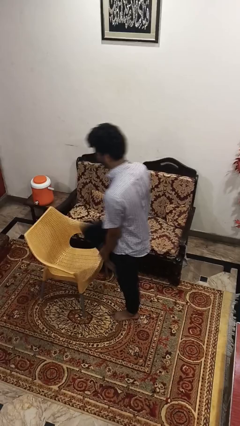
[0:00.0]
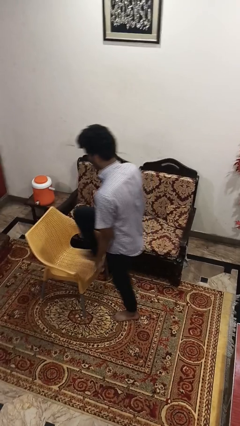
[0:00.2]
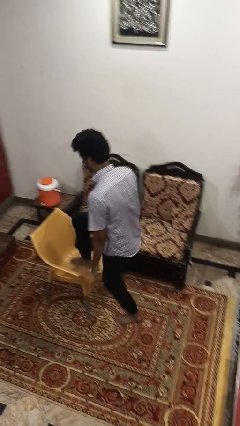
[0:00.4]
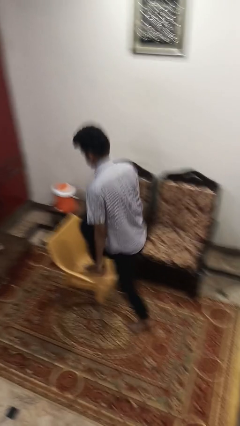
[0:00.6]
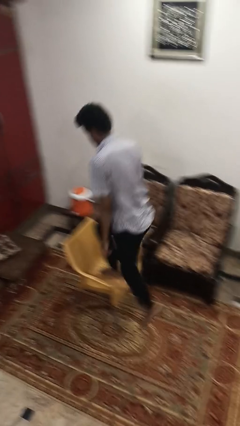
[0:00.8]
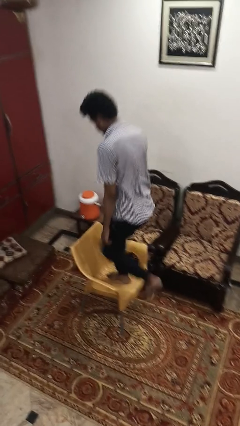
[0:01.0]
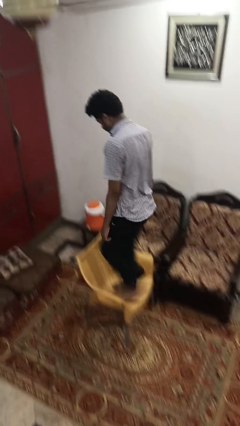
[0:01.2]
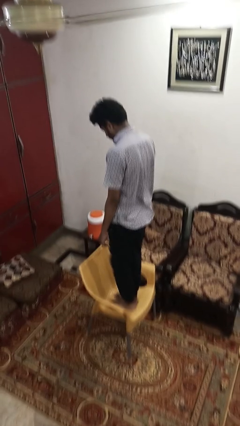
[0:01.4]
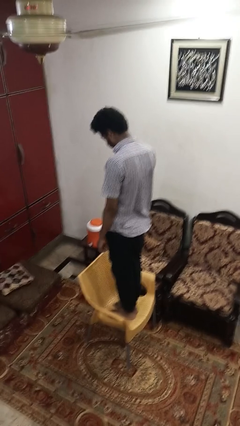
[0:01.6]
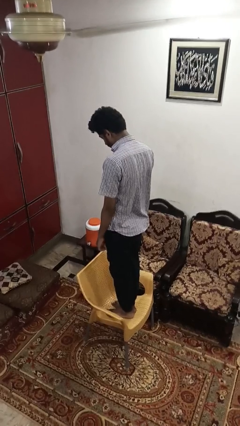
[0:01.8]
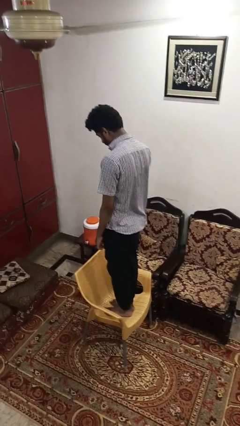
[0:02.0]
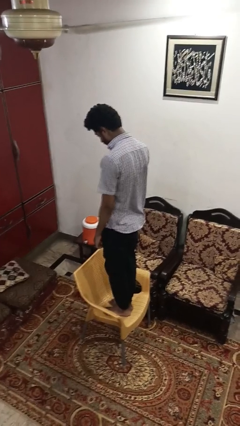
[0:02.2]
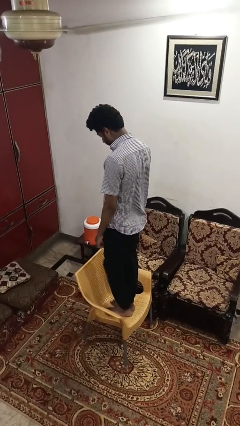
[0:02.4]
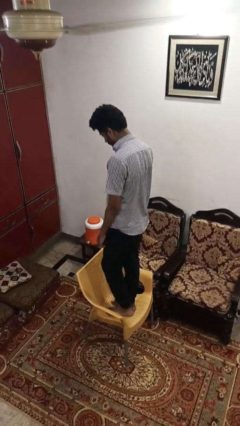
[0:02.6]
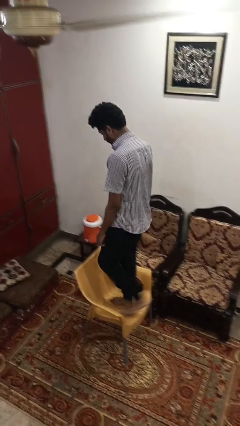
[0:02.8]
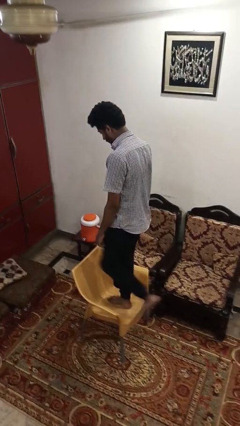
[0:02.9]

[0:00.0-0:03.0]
person climbs on chair

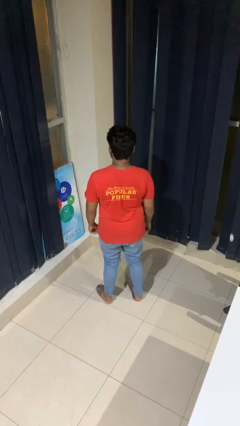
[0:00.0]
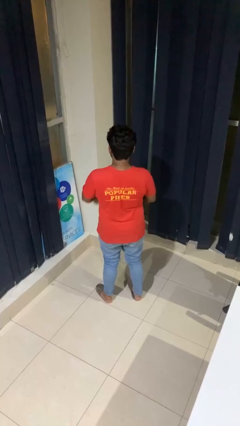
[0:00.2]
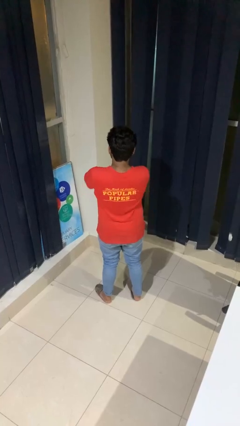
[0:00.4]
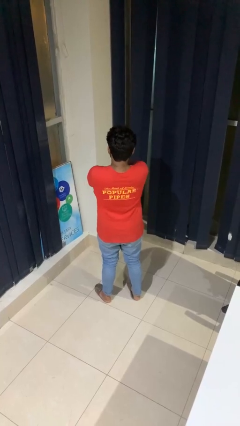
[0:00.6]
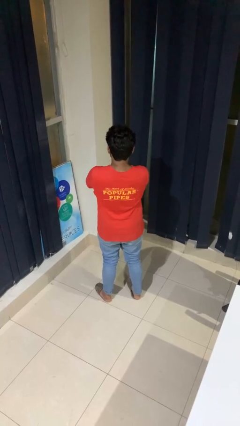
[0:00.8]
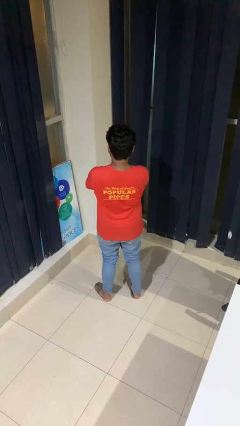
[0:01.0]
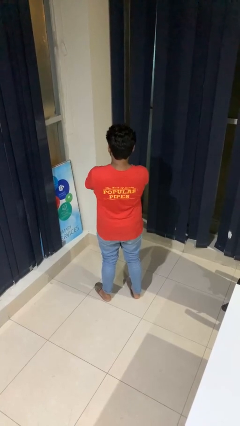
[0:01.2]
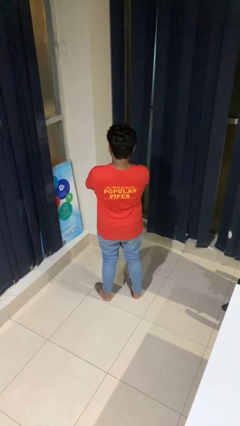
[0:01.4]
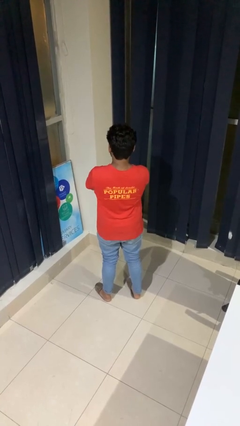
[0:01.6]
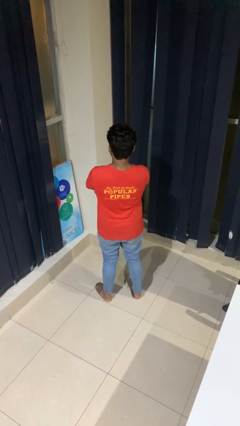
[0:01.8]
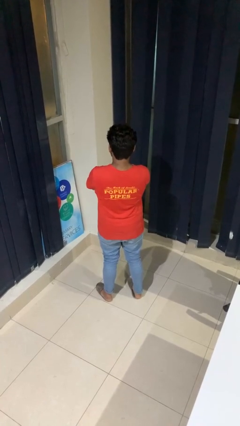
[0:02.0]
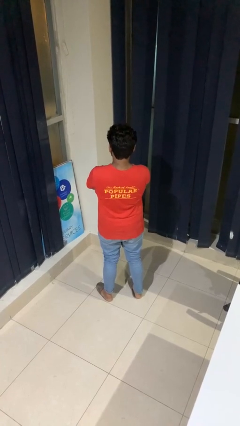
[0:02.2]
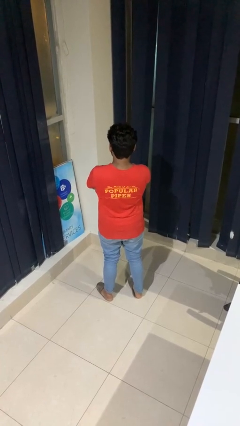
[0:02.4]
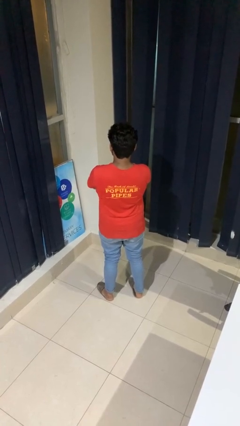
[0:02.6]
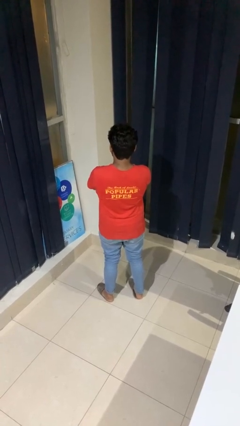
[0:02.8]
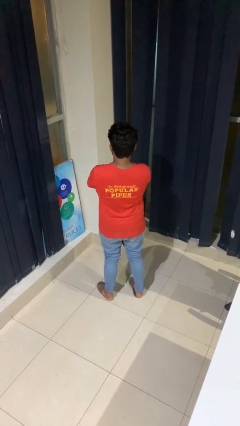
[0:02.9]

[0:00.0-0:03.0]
person crosses arms

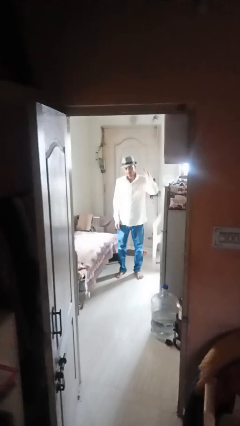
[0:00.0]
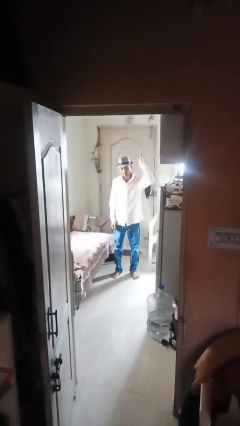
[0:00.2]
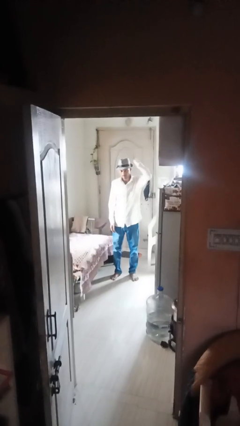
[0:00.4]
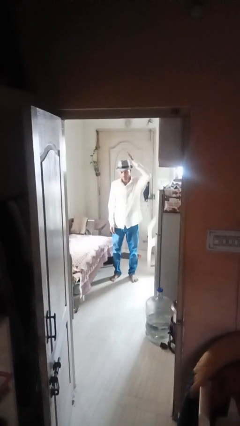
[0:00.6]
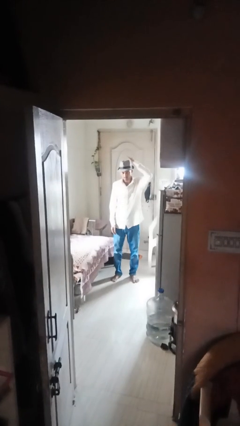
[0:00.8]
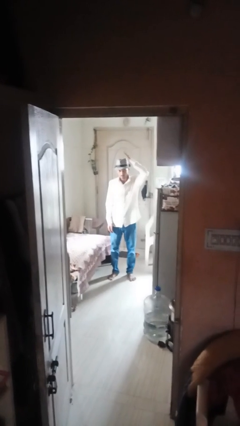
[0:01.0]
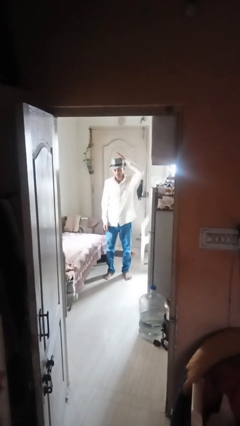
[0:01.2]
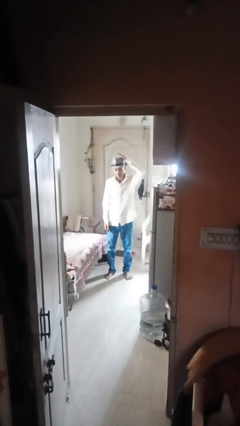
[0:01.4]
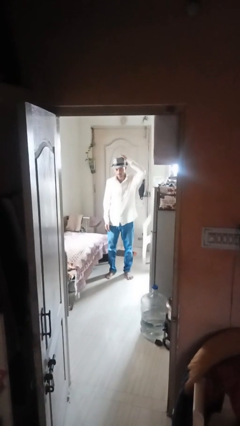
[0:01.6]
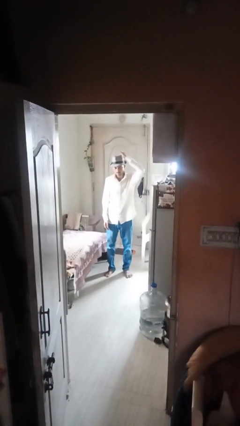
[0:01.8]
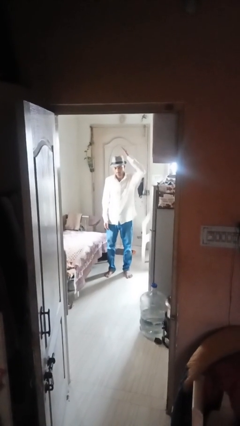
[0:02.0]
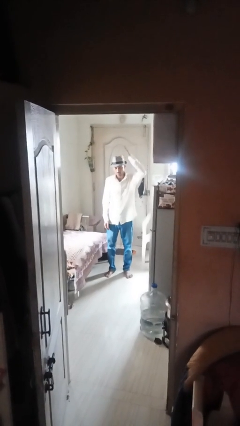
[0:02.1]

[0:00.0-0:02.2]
person pats head

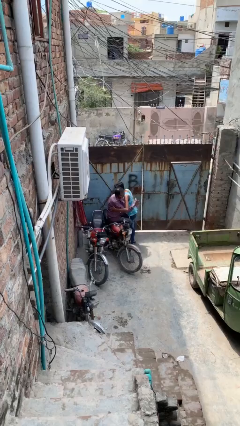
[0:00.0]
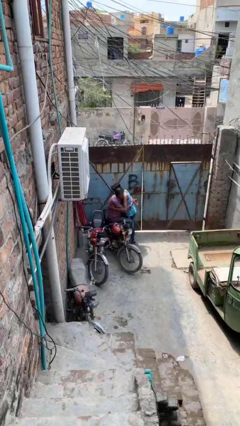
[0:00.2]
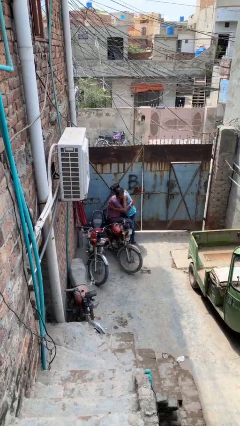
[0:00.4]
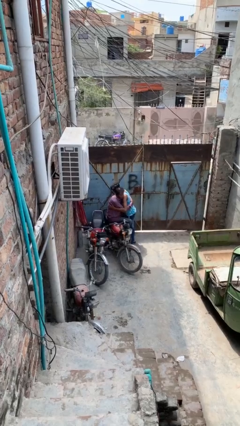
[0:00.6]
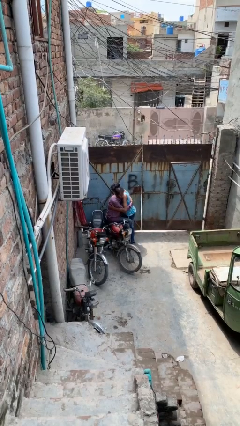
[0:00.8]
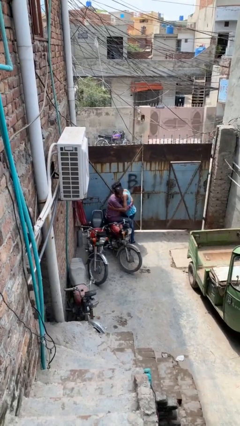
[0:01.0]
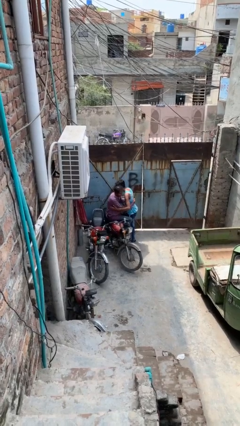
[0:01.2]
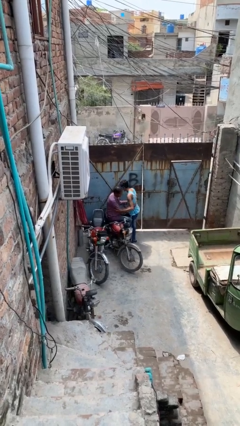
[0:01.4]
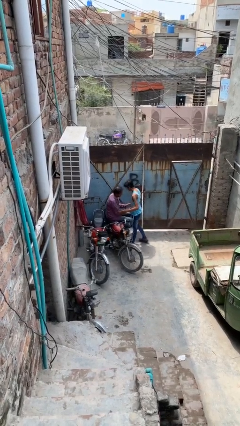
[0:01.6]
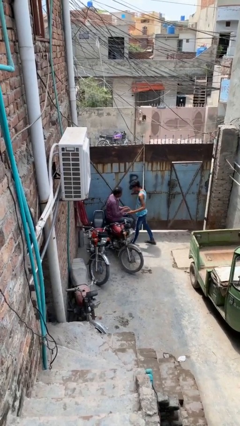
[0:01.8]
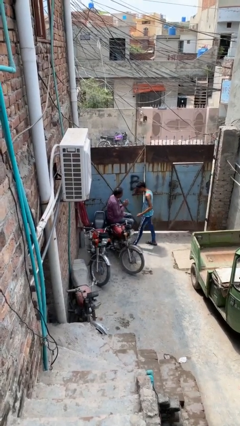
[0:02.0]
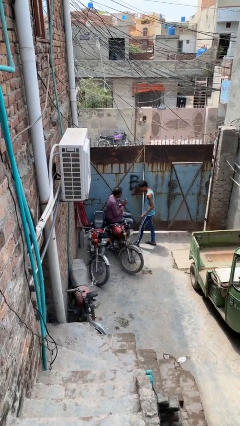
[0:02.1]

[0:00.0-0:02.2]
person embraces person

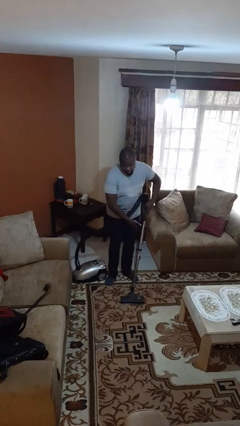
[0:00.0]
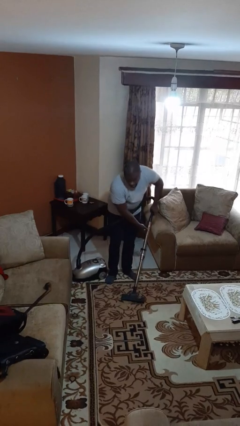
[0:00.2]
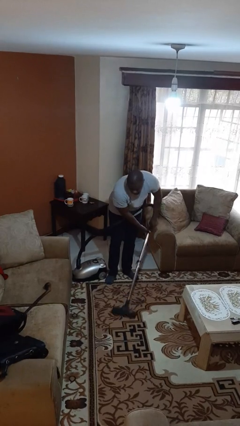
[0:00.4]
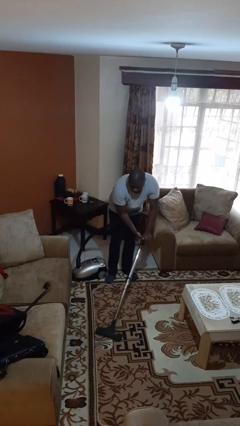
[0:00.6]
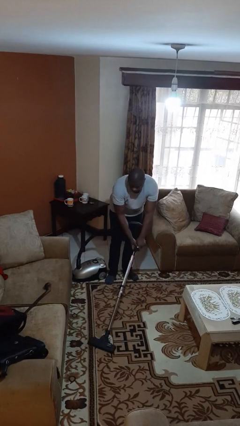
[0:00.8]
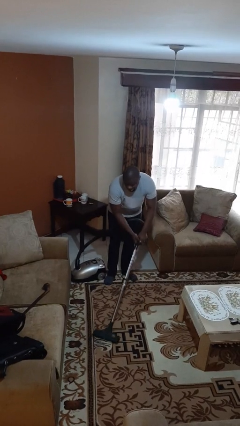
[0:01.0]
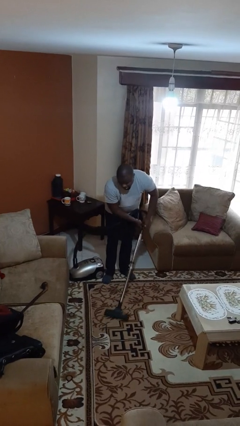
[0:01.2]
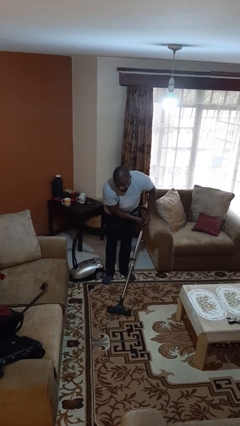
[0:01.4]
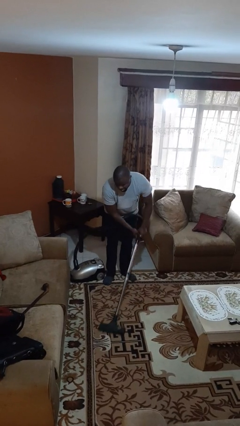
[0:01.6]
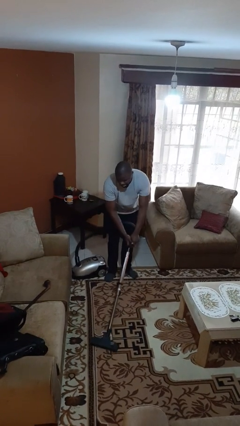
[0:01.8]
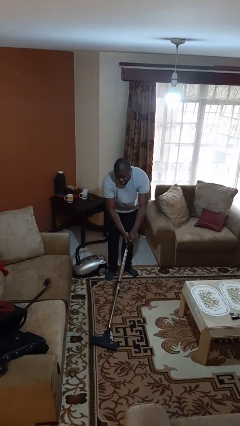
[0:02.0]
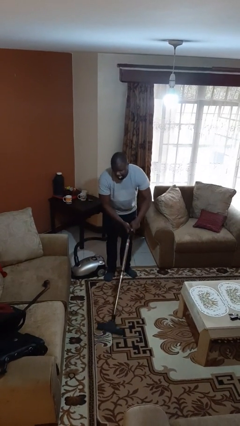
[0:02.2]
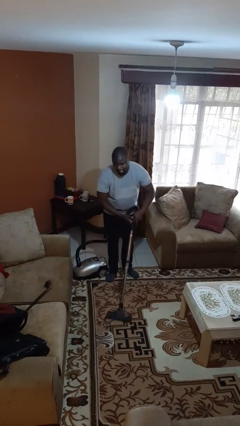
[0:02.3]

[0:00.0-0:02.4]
person vacuums carpet

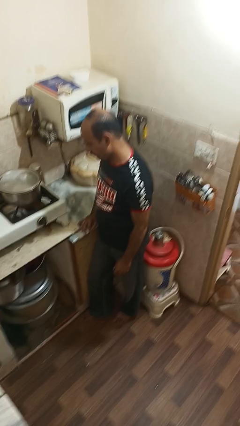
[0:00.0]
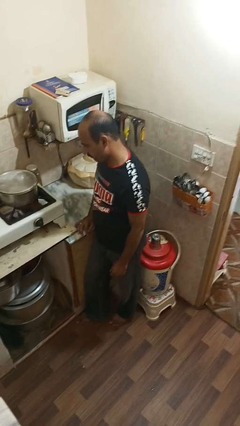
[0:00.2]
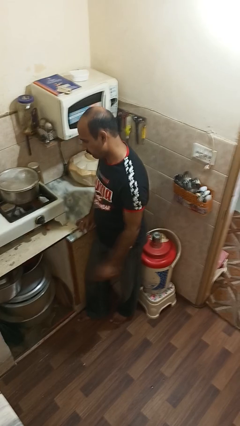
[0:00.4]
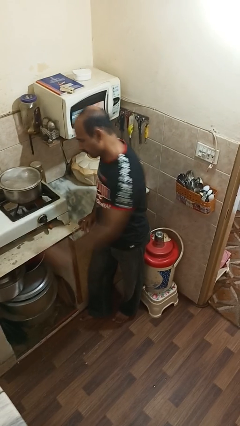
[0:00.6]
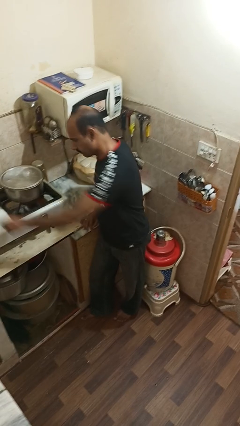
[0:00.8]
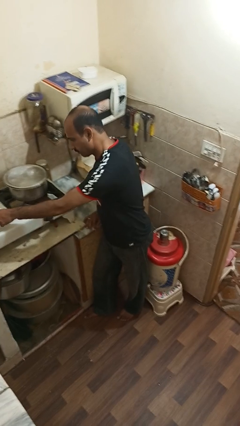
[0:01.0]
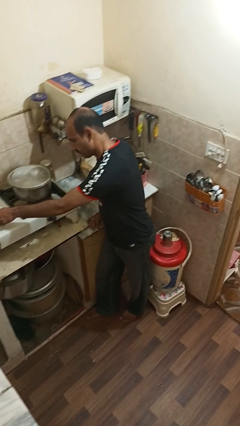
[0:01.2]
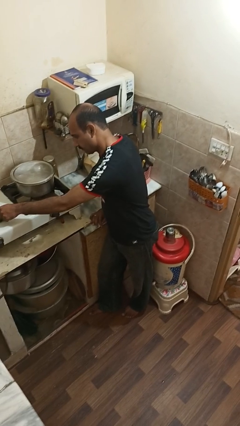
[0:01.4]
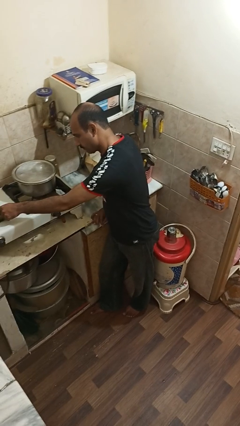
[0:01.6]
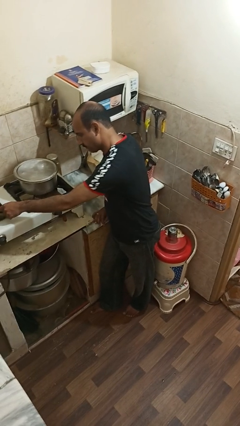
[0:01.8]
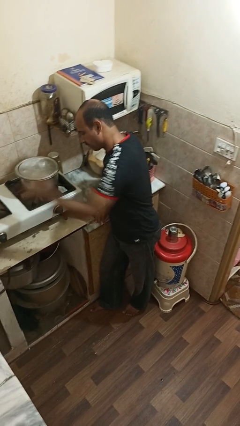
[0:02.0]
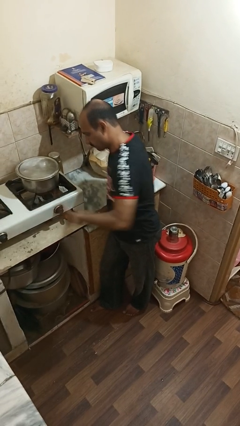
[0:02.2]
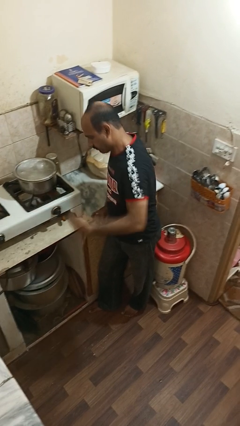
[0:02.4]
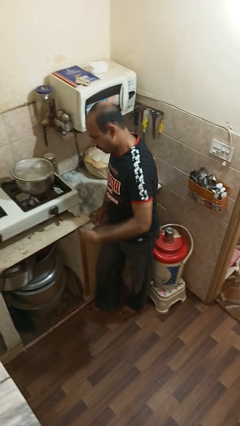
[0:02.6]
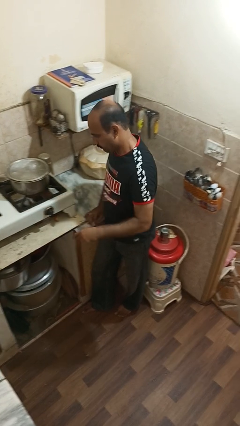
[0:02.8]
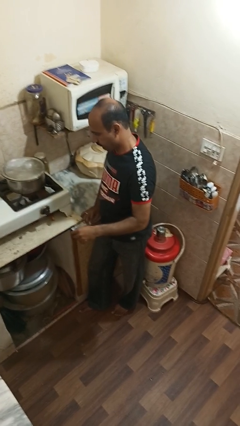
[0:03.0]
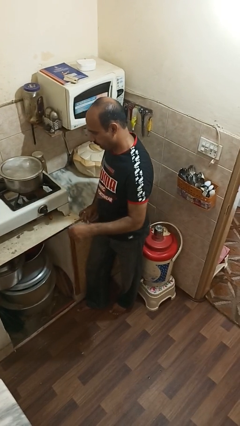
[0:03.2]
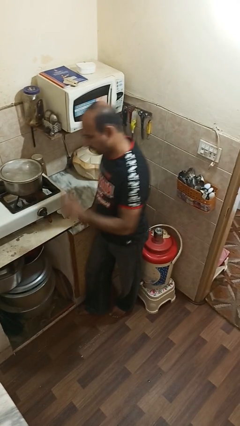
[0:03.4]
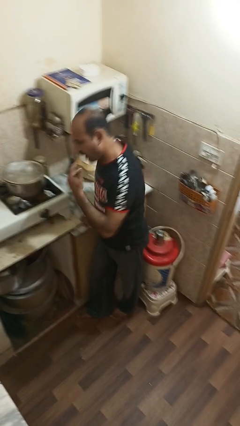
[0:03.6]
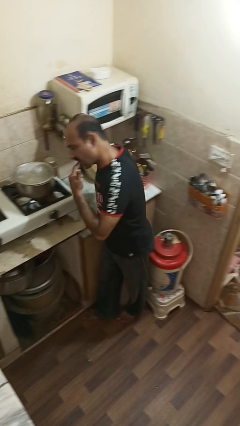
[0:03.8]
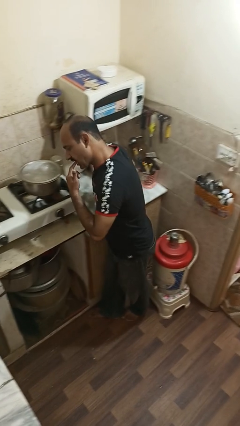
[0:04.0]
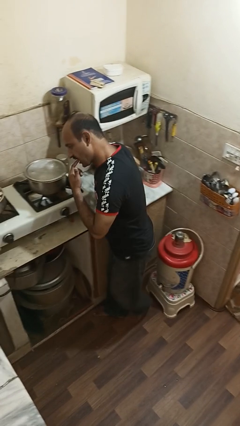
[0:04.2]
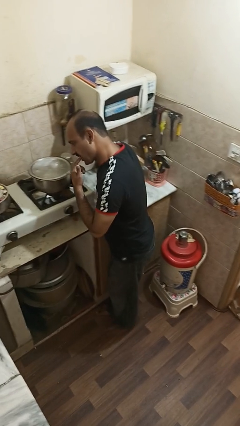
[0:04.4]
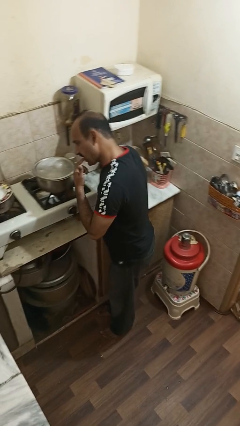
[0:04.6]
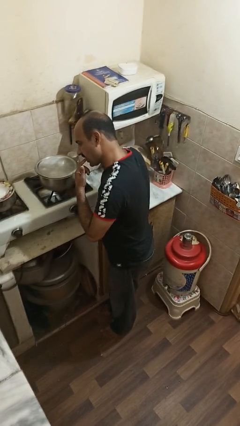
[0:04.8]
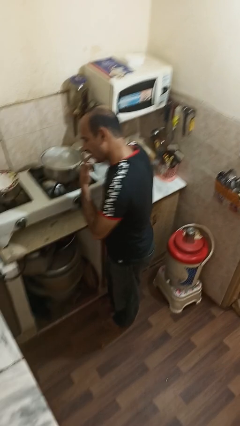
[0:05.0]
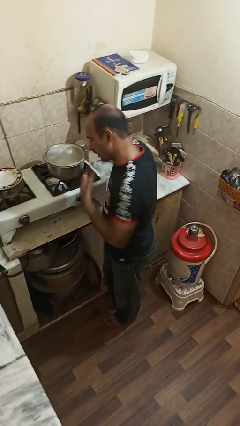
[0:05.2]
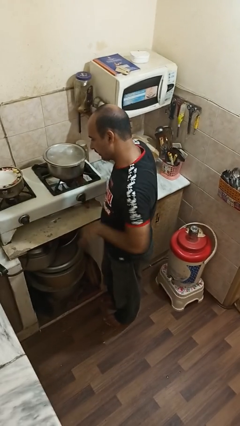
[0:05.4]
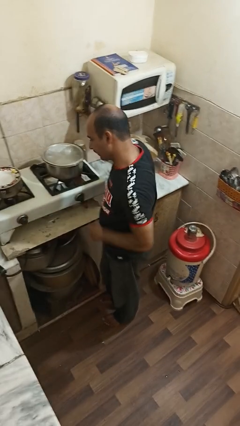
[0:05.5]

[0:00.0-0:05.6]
person burns hand
